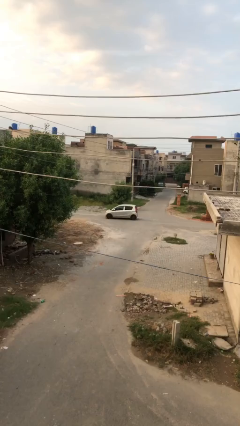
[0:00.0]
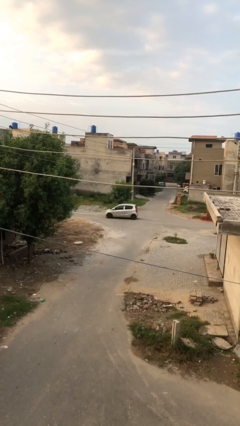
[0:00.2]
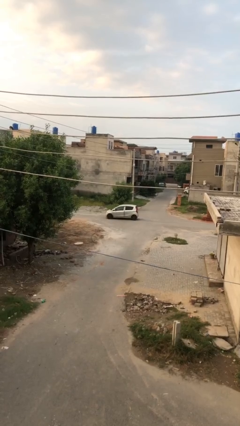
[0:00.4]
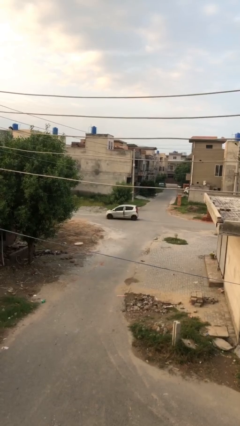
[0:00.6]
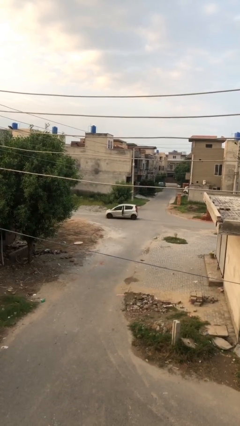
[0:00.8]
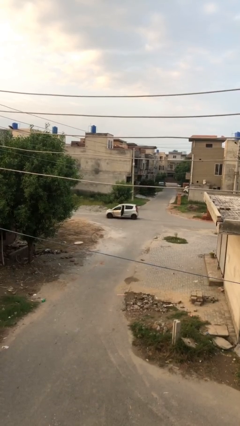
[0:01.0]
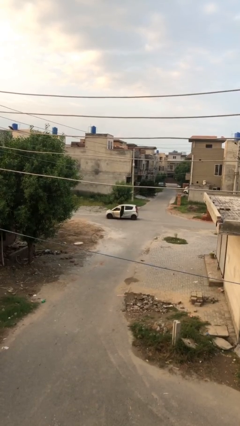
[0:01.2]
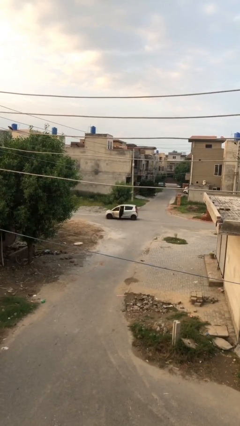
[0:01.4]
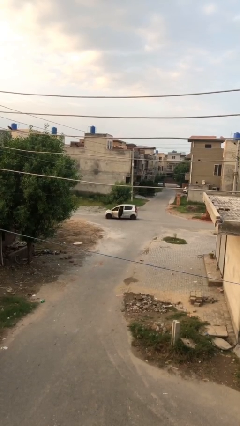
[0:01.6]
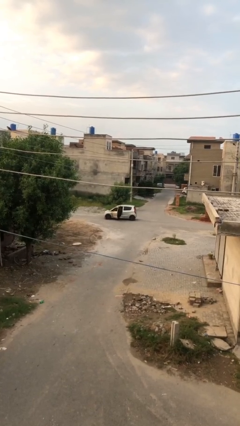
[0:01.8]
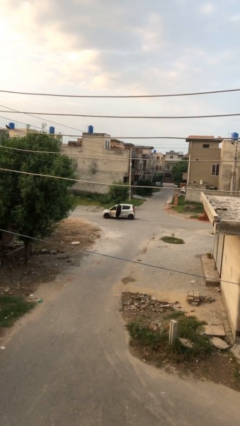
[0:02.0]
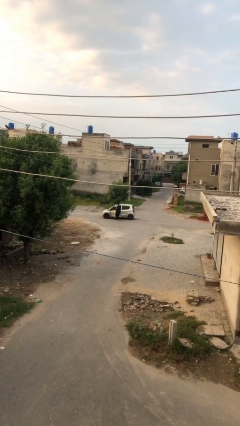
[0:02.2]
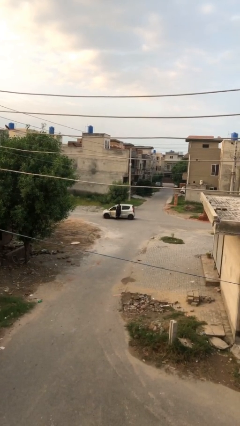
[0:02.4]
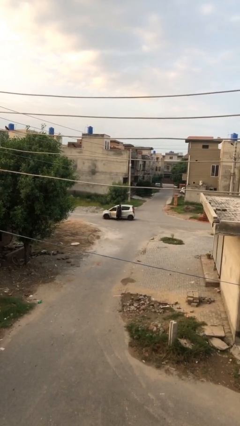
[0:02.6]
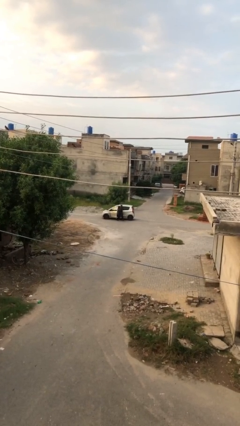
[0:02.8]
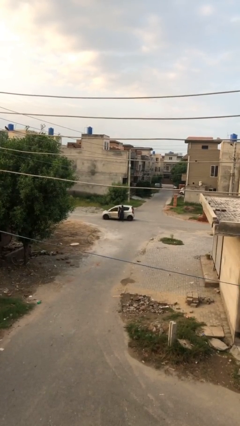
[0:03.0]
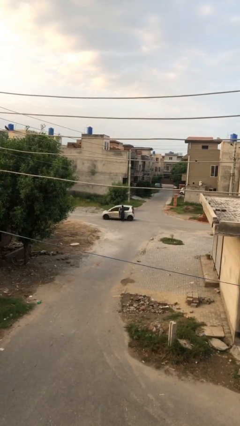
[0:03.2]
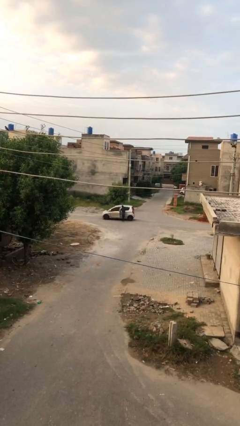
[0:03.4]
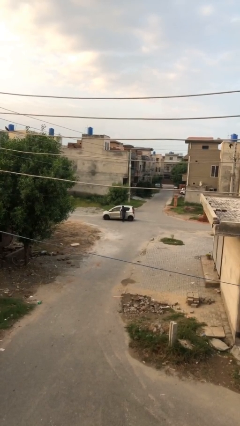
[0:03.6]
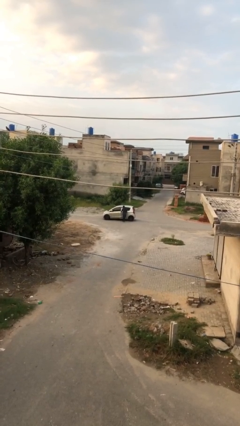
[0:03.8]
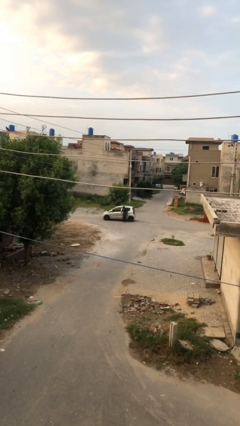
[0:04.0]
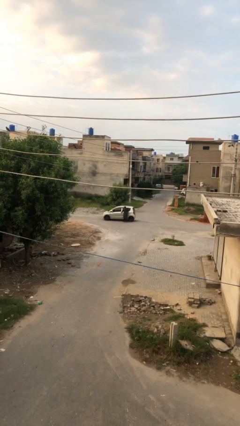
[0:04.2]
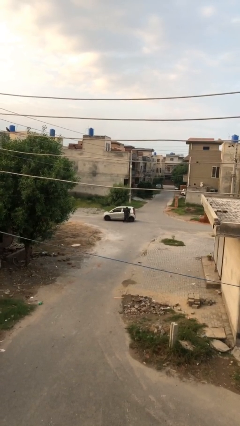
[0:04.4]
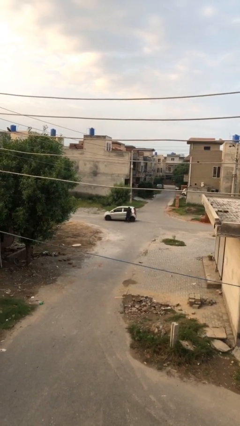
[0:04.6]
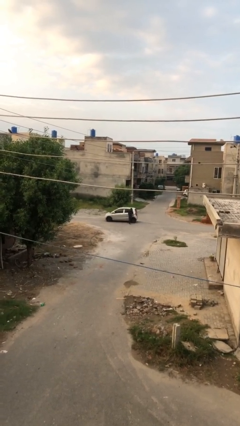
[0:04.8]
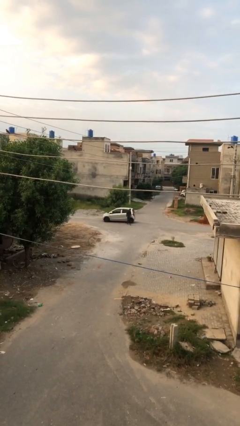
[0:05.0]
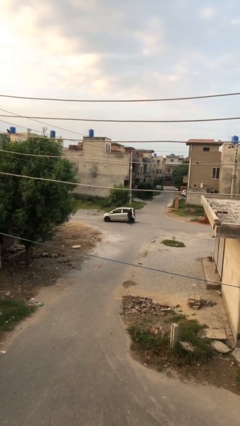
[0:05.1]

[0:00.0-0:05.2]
car drops off person

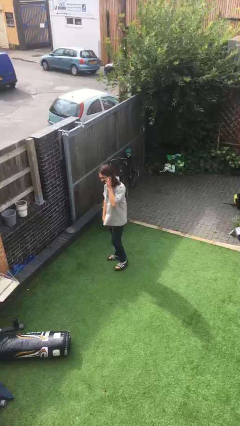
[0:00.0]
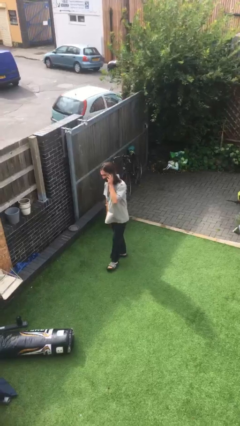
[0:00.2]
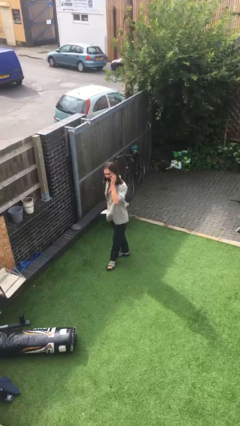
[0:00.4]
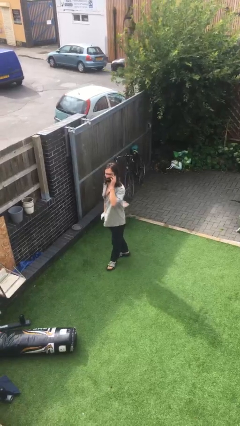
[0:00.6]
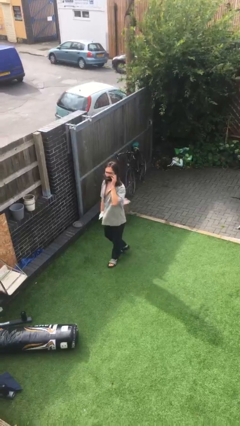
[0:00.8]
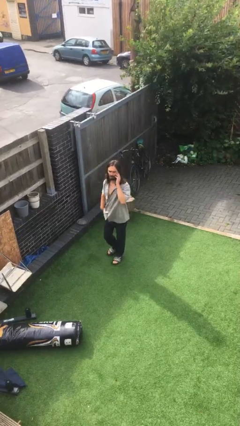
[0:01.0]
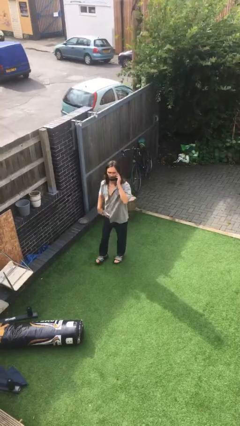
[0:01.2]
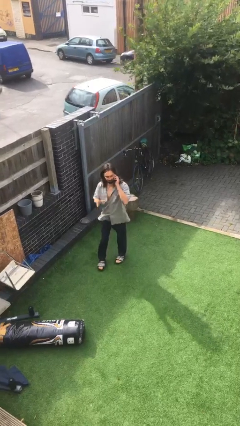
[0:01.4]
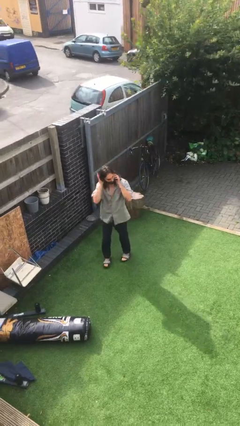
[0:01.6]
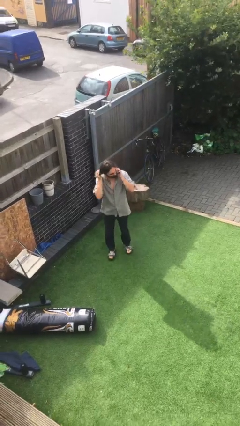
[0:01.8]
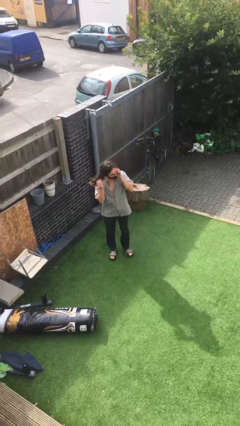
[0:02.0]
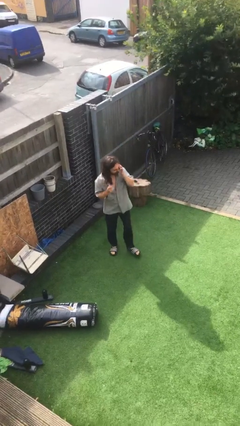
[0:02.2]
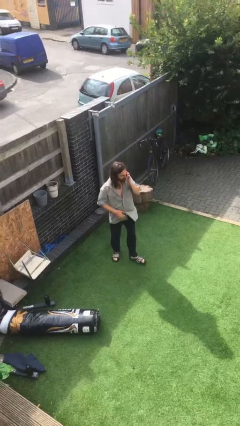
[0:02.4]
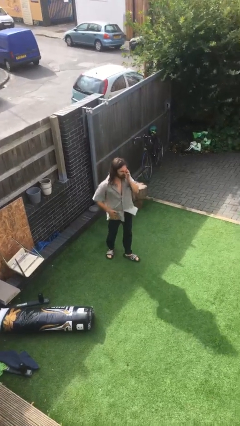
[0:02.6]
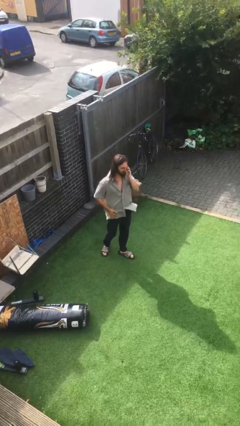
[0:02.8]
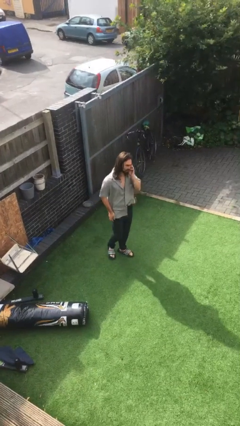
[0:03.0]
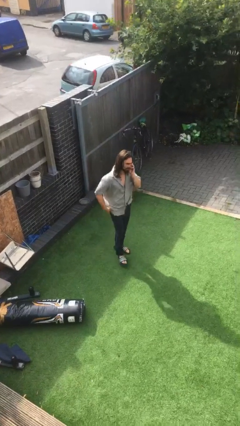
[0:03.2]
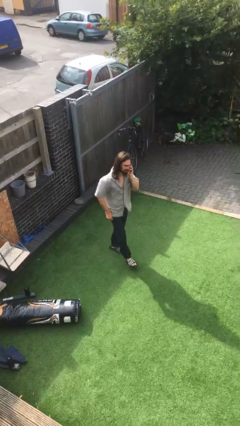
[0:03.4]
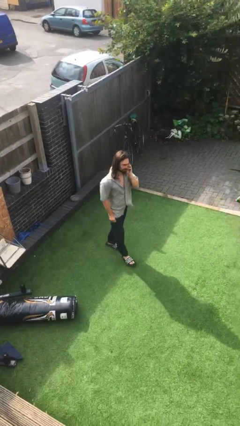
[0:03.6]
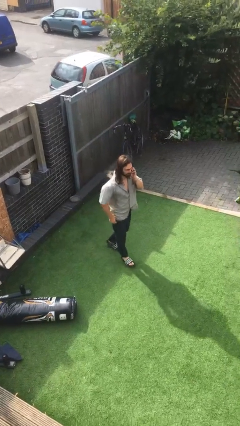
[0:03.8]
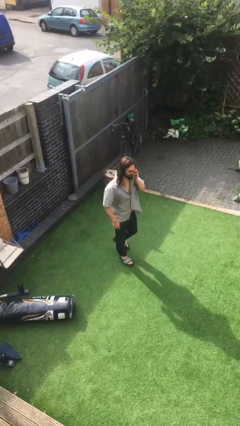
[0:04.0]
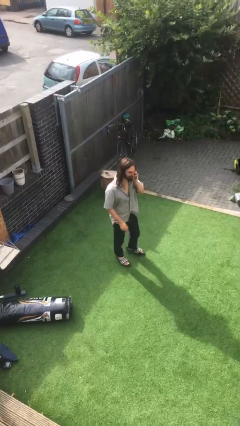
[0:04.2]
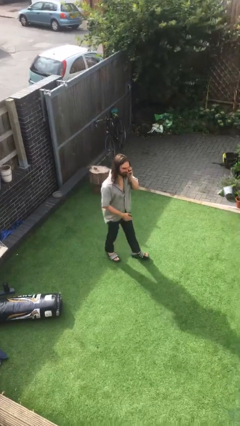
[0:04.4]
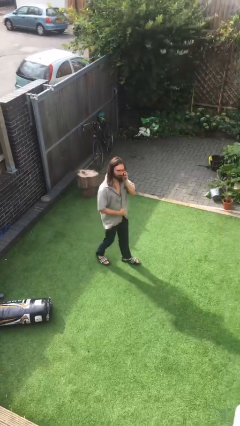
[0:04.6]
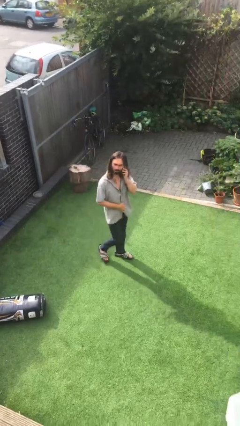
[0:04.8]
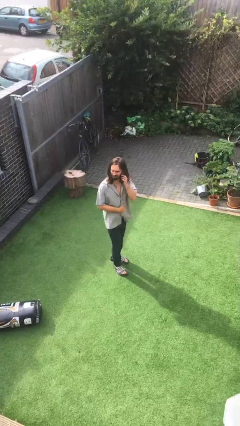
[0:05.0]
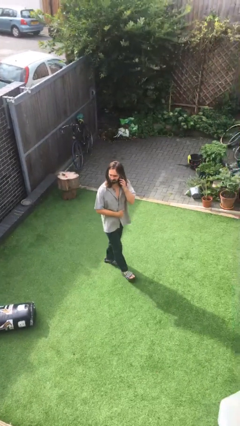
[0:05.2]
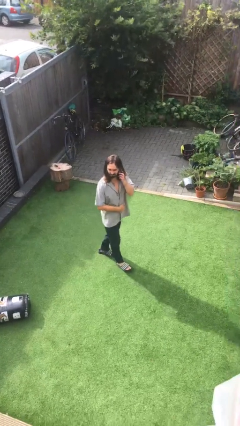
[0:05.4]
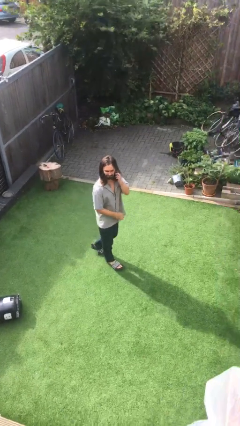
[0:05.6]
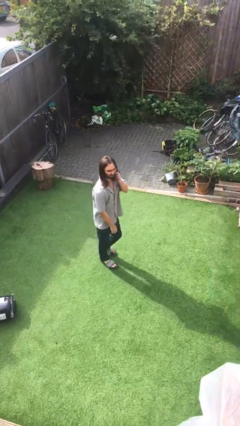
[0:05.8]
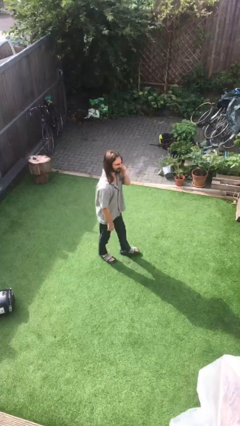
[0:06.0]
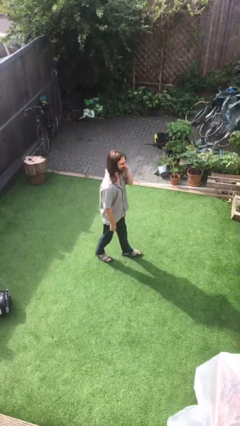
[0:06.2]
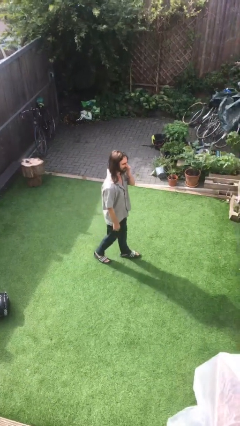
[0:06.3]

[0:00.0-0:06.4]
person talks on phone

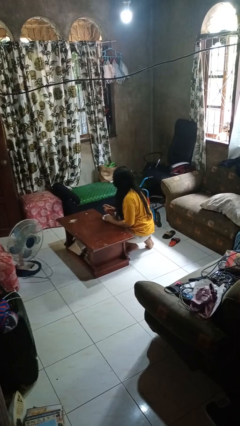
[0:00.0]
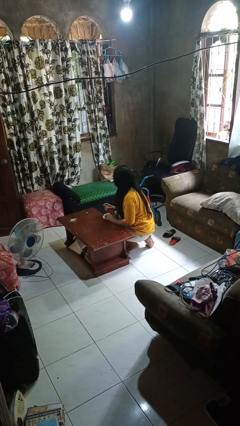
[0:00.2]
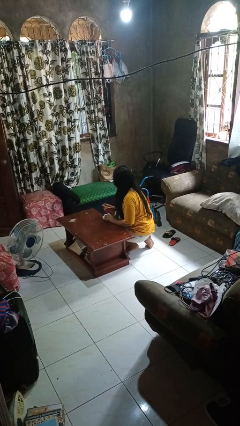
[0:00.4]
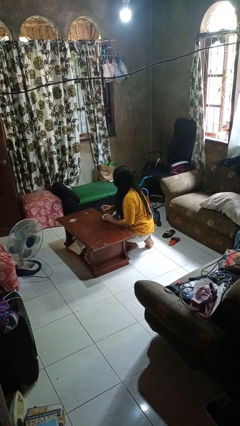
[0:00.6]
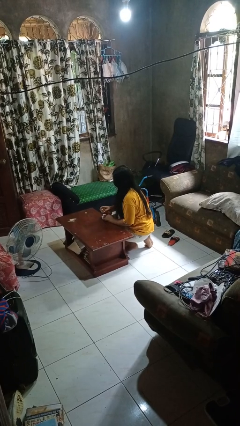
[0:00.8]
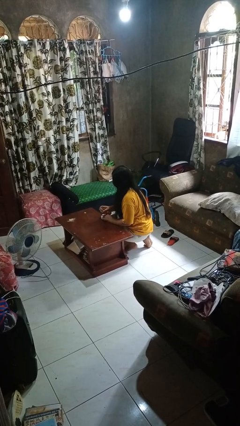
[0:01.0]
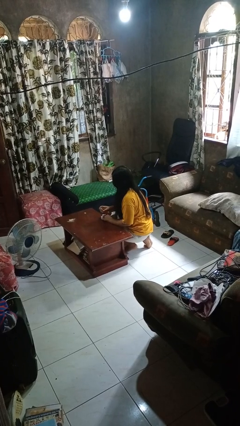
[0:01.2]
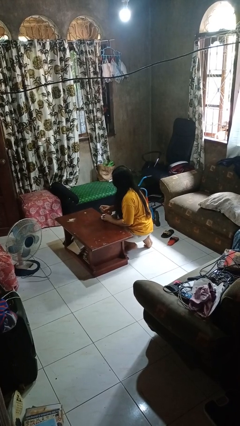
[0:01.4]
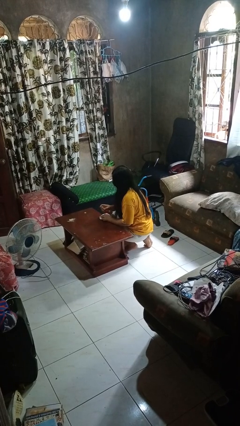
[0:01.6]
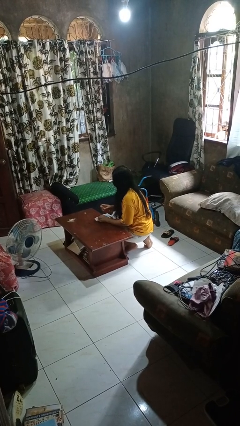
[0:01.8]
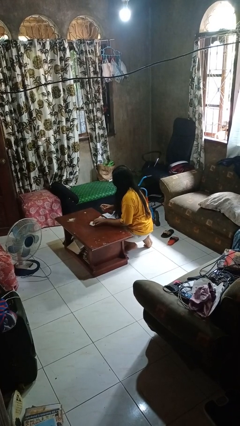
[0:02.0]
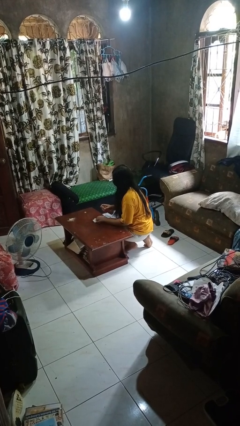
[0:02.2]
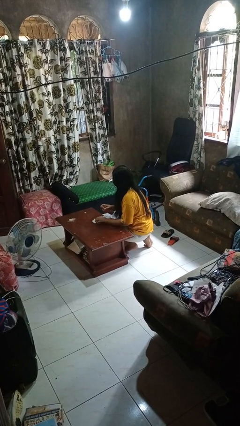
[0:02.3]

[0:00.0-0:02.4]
person sprays from bottle

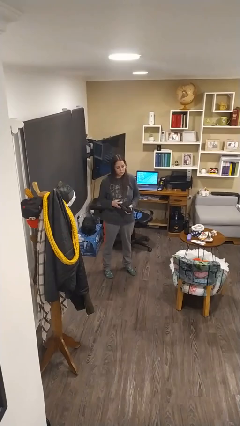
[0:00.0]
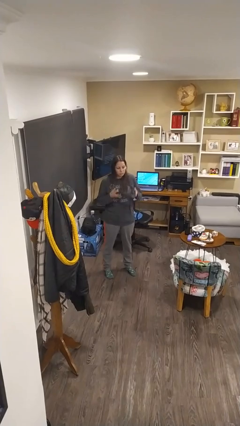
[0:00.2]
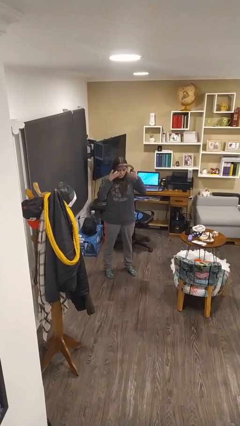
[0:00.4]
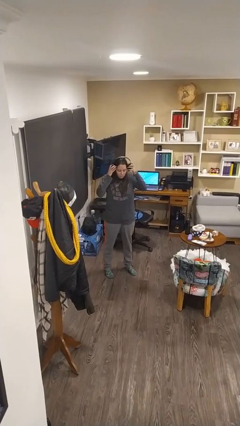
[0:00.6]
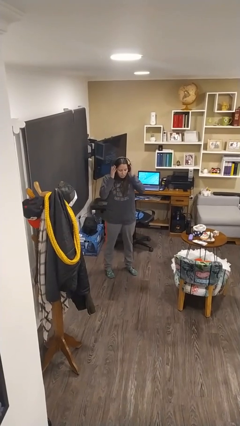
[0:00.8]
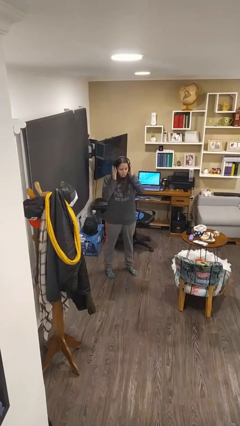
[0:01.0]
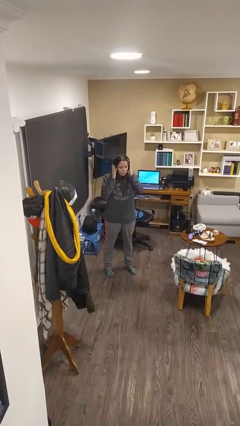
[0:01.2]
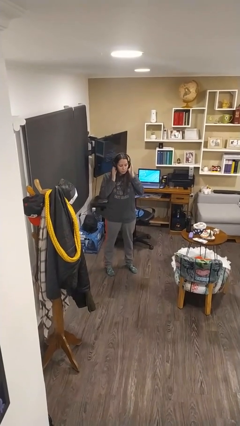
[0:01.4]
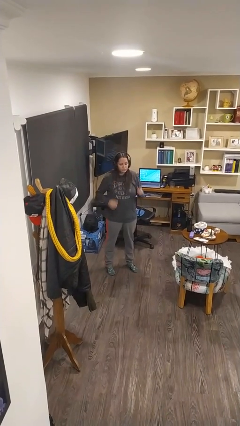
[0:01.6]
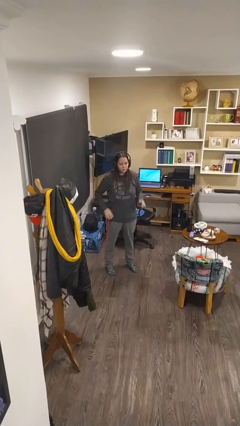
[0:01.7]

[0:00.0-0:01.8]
person puts on headphones

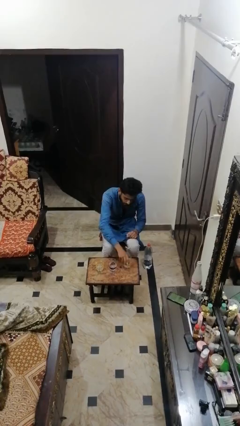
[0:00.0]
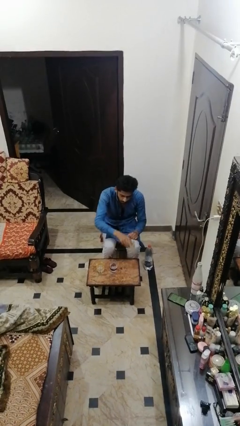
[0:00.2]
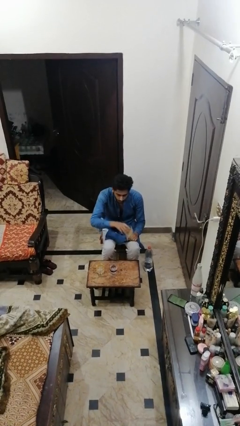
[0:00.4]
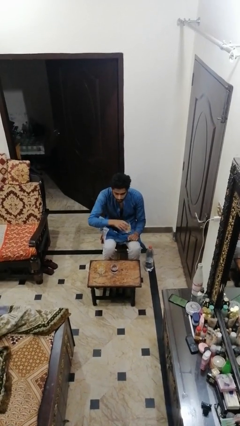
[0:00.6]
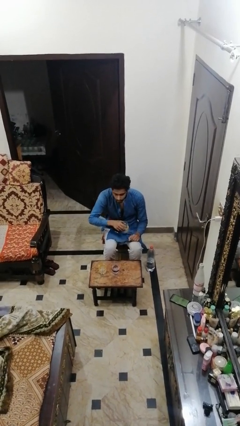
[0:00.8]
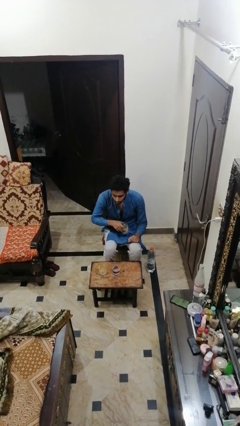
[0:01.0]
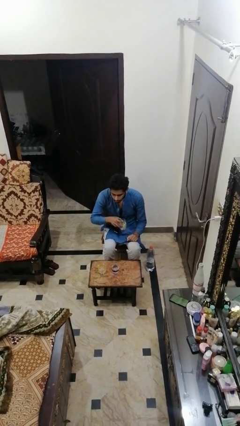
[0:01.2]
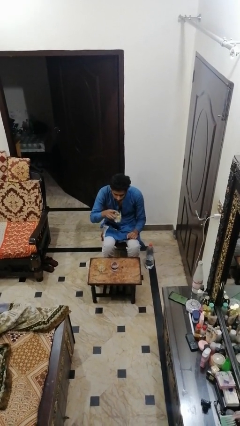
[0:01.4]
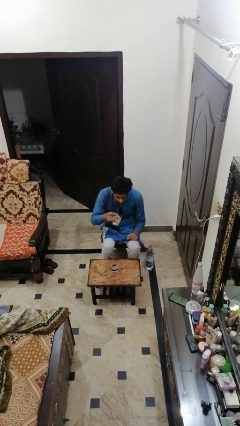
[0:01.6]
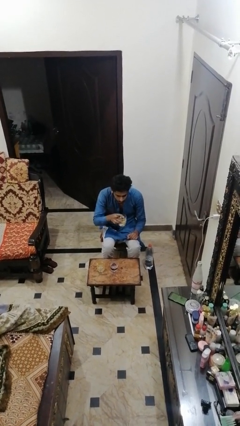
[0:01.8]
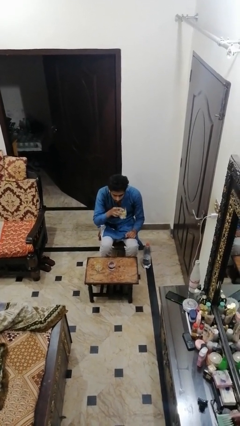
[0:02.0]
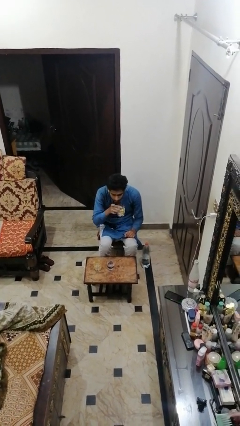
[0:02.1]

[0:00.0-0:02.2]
person picks up object from table
